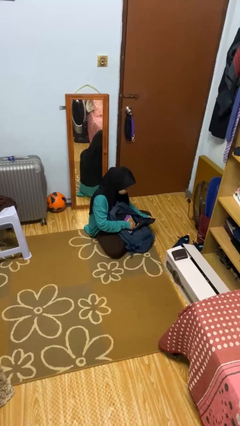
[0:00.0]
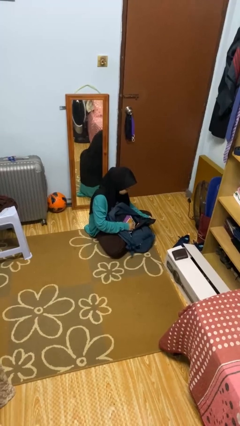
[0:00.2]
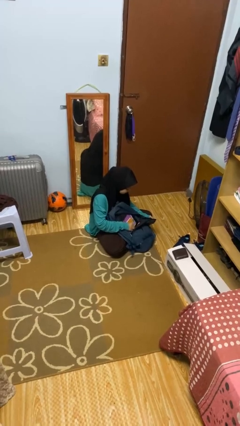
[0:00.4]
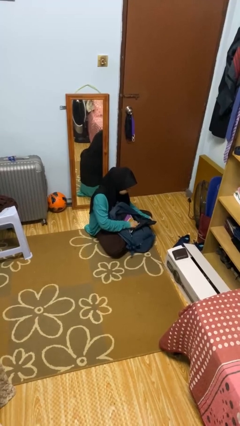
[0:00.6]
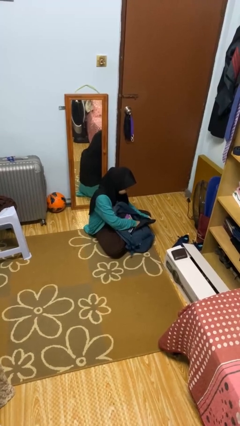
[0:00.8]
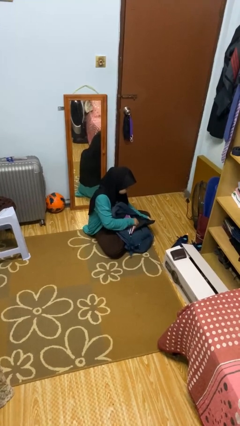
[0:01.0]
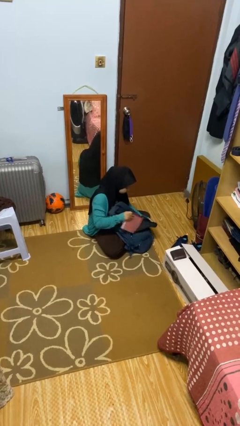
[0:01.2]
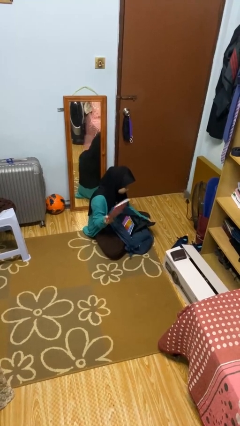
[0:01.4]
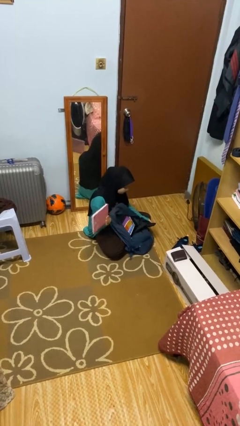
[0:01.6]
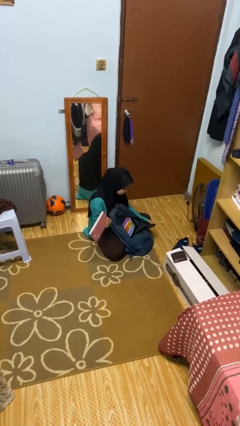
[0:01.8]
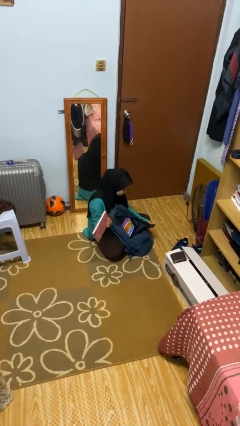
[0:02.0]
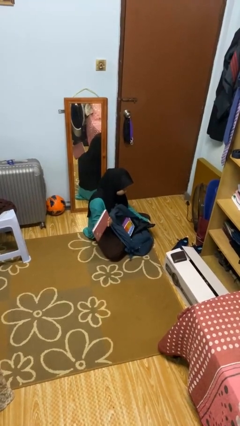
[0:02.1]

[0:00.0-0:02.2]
person takes object from backpack

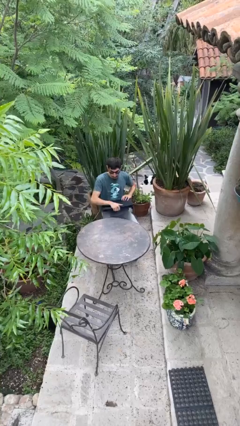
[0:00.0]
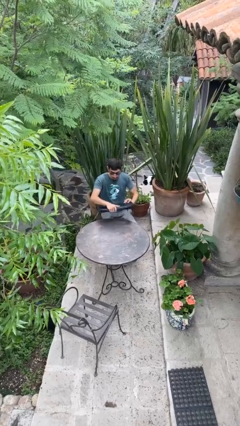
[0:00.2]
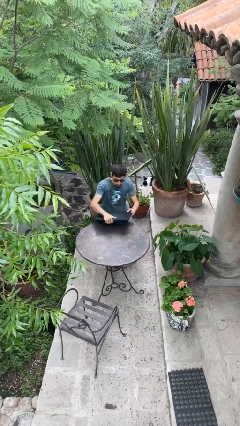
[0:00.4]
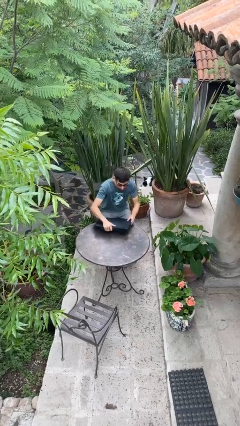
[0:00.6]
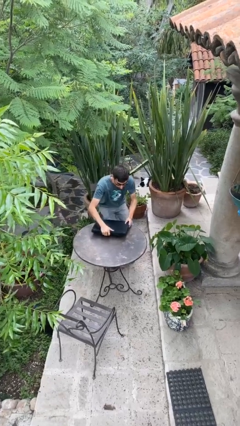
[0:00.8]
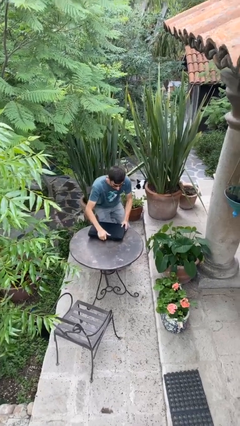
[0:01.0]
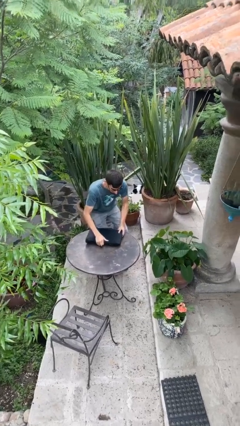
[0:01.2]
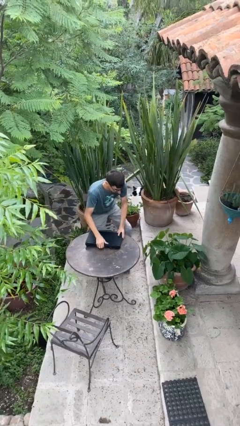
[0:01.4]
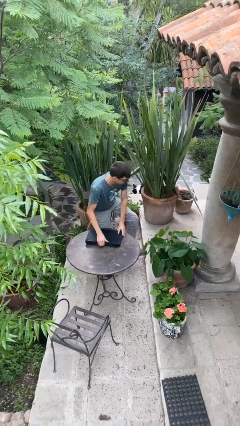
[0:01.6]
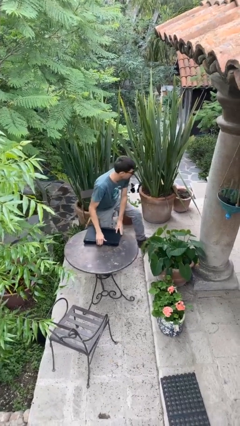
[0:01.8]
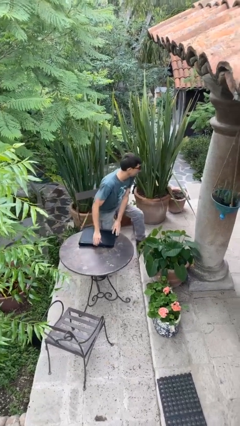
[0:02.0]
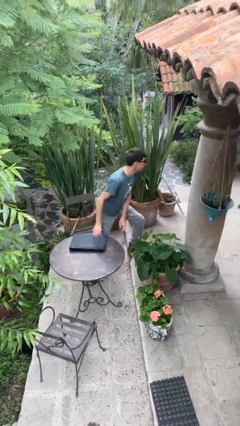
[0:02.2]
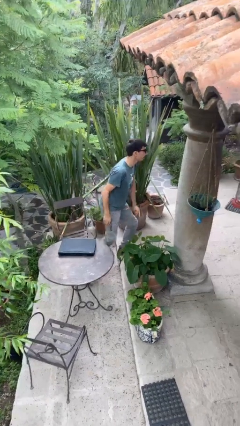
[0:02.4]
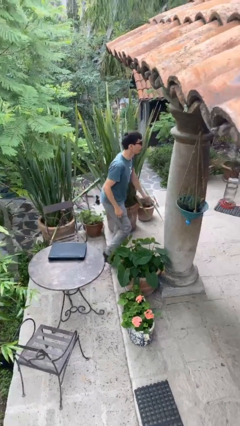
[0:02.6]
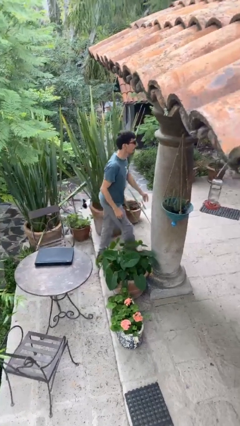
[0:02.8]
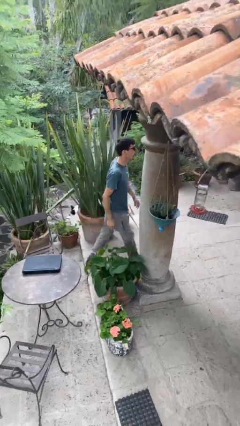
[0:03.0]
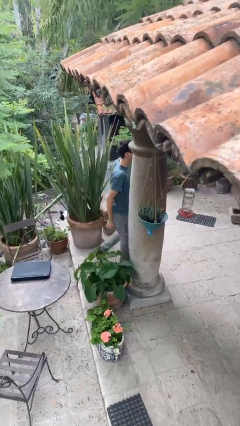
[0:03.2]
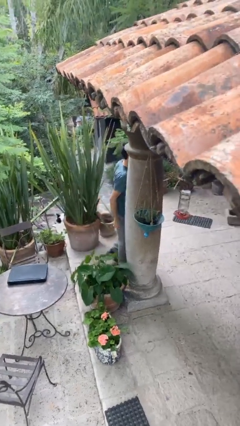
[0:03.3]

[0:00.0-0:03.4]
person stands up

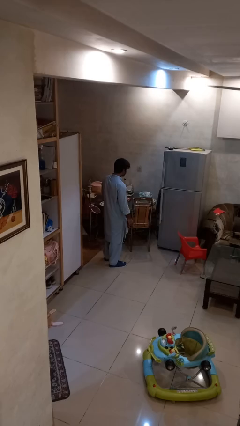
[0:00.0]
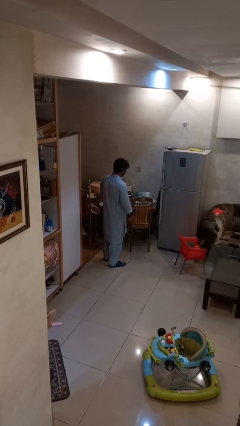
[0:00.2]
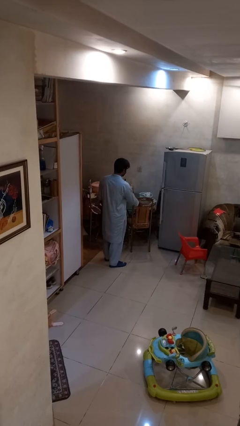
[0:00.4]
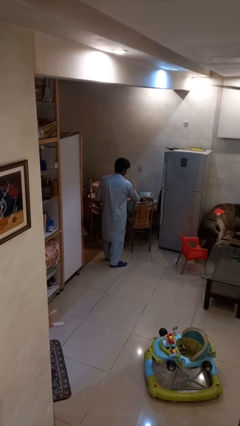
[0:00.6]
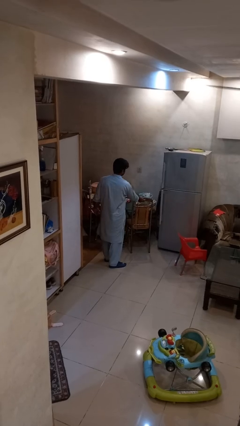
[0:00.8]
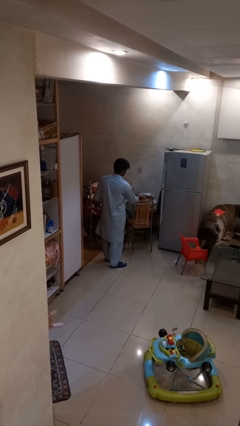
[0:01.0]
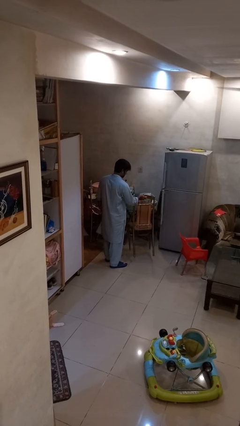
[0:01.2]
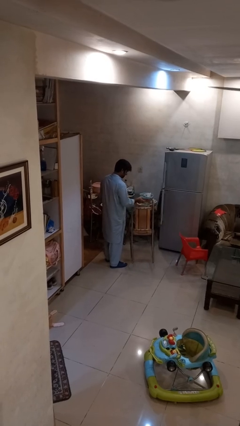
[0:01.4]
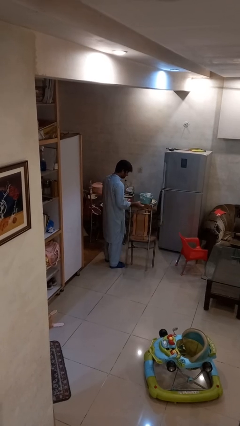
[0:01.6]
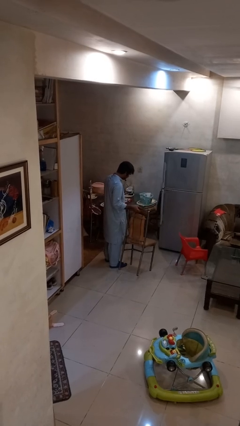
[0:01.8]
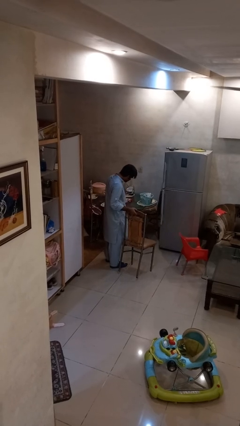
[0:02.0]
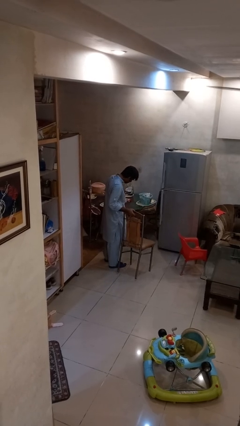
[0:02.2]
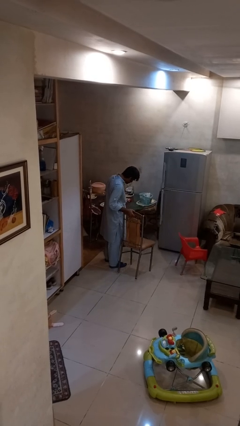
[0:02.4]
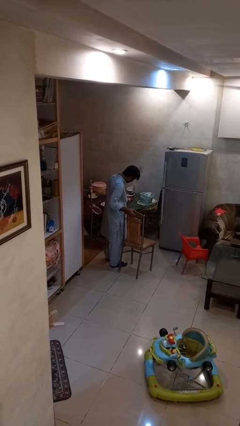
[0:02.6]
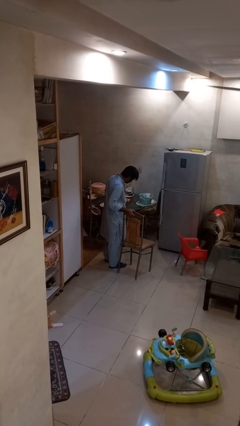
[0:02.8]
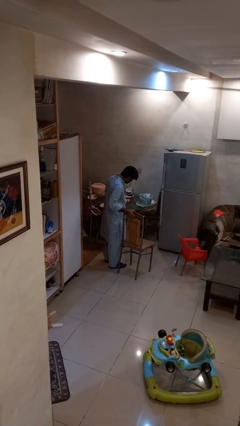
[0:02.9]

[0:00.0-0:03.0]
person pulls out chair

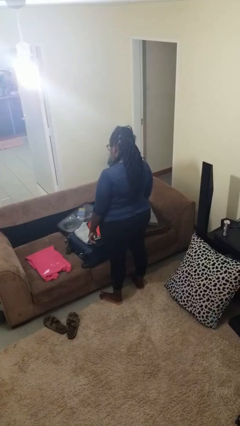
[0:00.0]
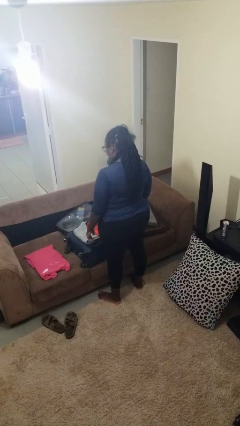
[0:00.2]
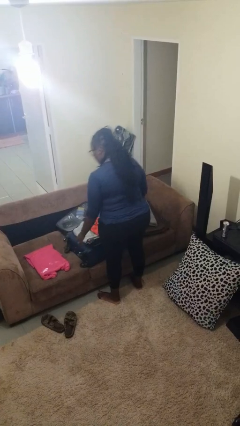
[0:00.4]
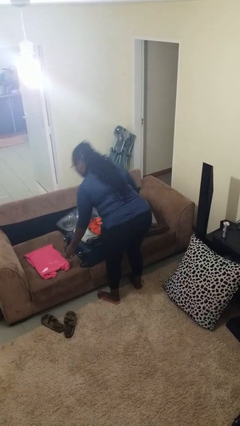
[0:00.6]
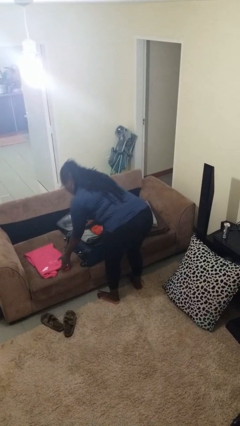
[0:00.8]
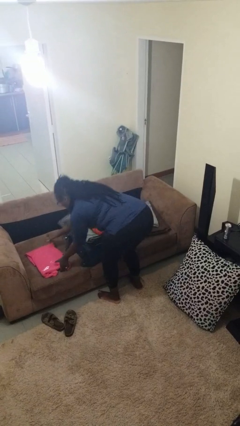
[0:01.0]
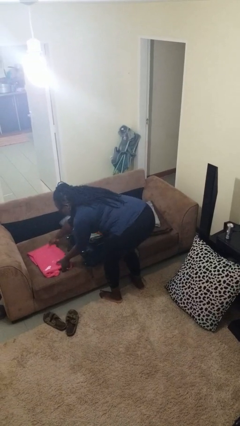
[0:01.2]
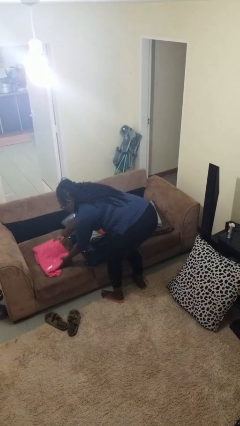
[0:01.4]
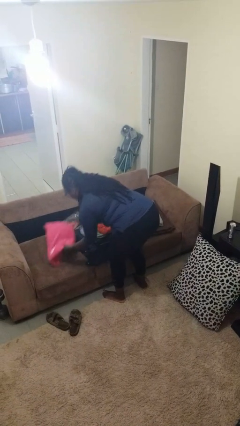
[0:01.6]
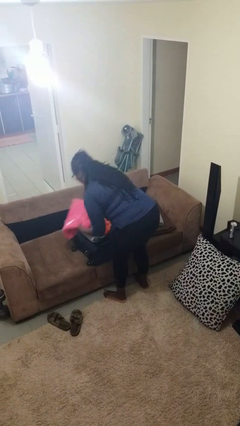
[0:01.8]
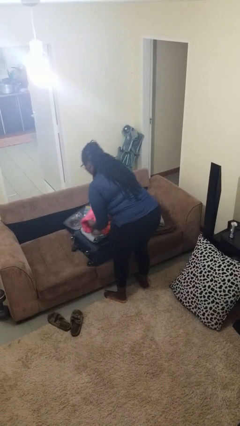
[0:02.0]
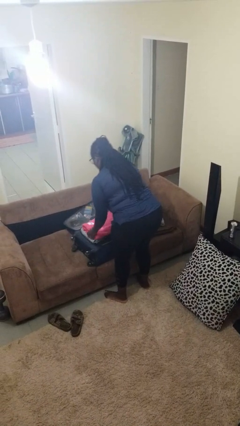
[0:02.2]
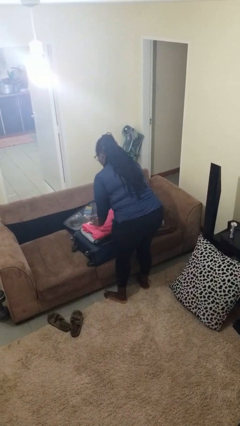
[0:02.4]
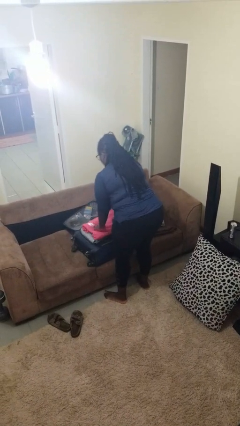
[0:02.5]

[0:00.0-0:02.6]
person loads clothes into suitcase

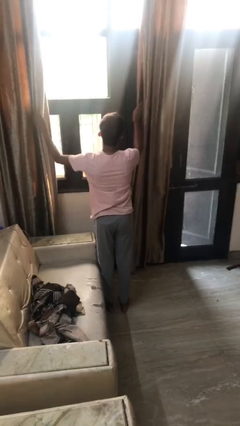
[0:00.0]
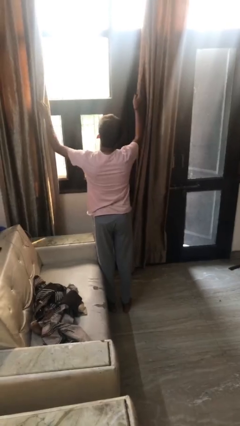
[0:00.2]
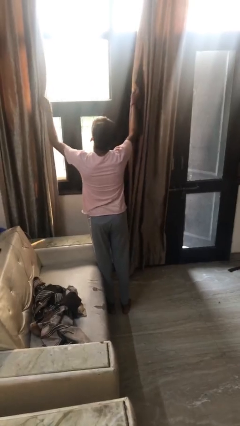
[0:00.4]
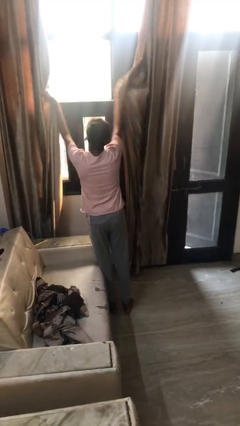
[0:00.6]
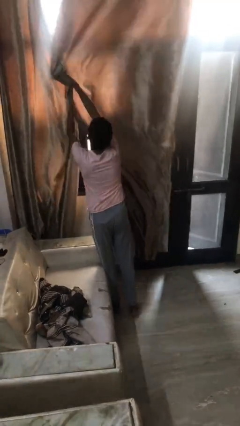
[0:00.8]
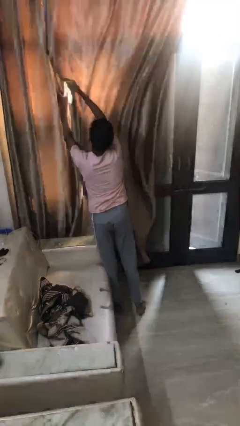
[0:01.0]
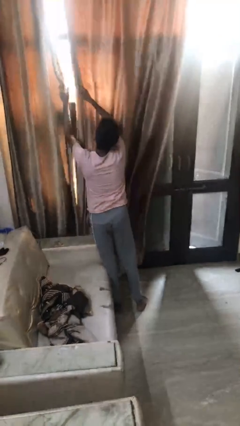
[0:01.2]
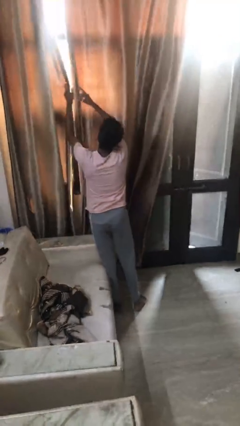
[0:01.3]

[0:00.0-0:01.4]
person closes curtains

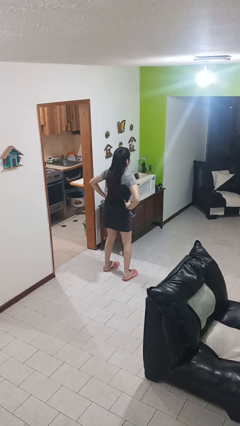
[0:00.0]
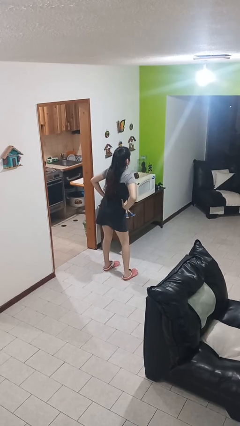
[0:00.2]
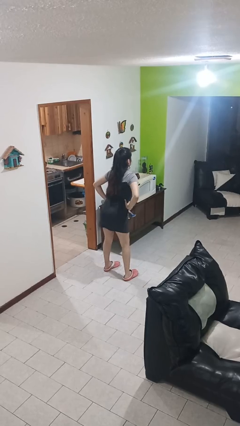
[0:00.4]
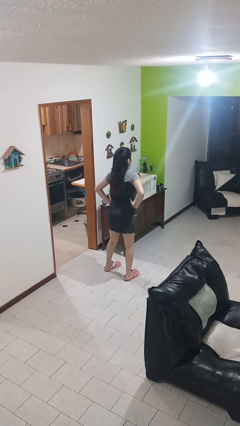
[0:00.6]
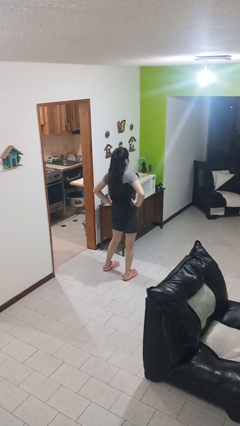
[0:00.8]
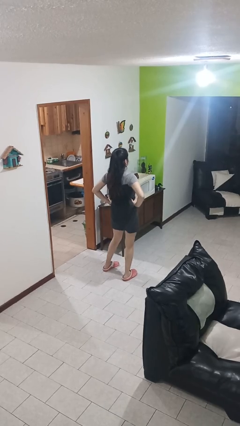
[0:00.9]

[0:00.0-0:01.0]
person wiggles hips

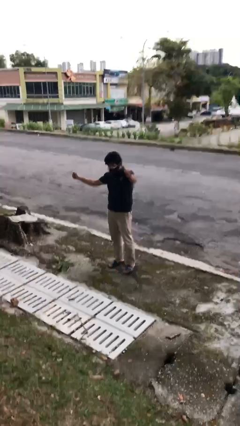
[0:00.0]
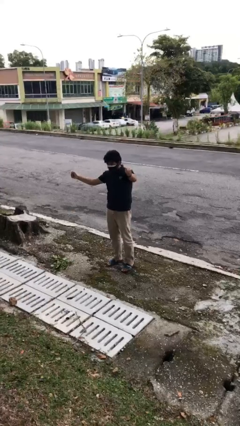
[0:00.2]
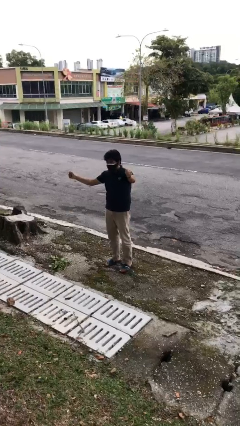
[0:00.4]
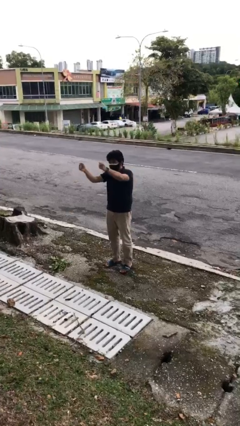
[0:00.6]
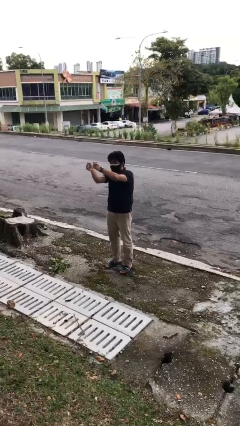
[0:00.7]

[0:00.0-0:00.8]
person gestures zoom in

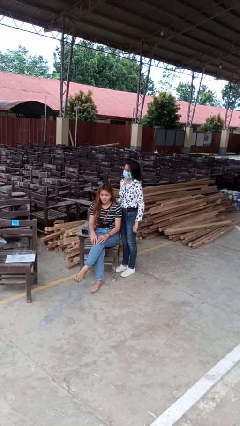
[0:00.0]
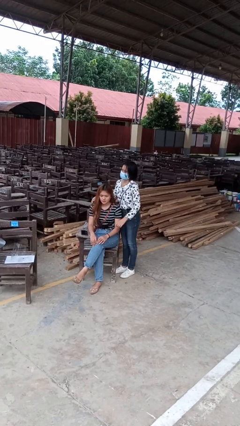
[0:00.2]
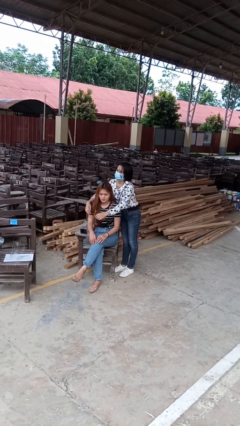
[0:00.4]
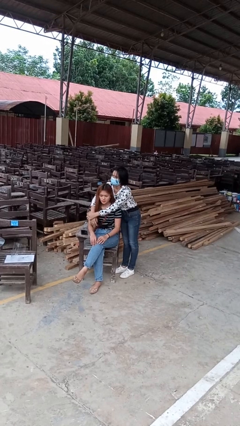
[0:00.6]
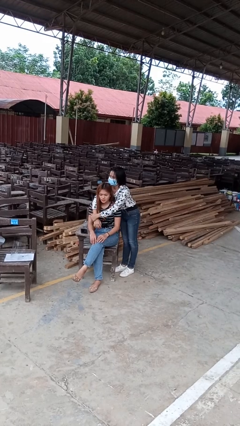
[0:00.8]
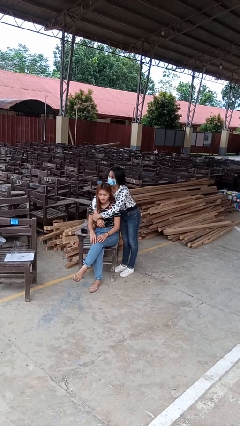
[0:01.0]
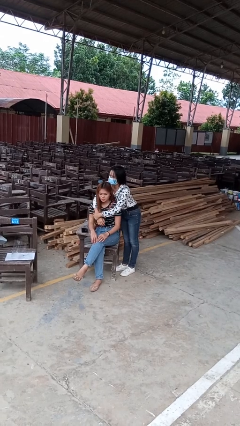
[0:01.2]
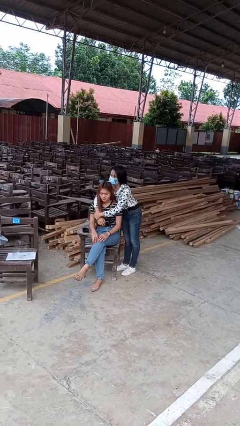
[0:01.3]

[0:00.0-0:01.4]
person hugs person from behind

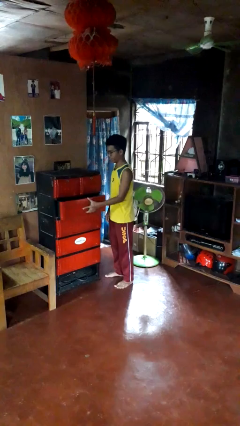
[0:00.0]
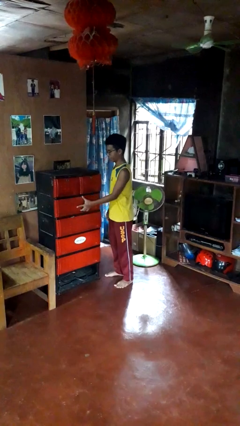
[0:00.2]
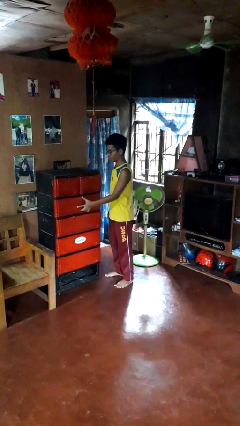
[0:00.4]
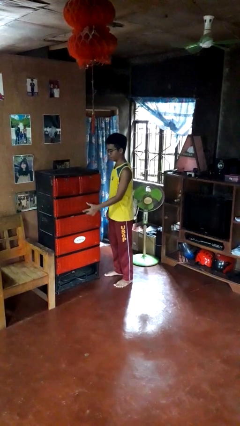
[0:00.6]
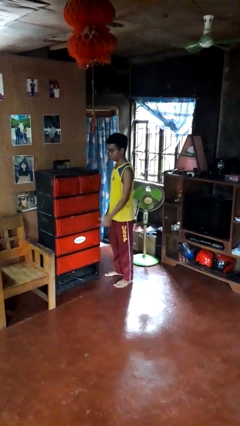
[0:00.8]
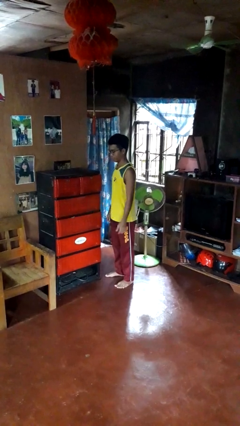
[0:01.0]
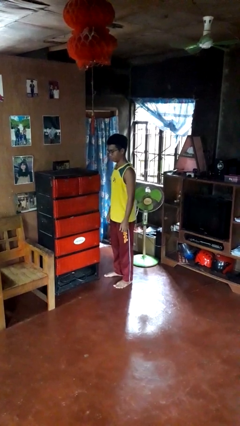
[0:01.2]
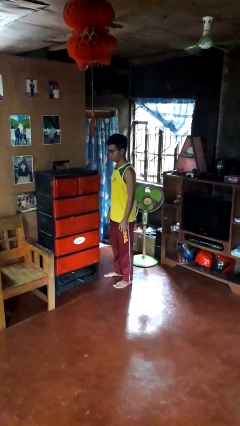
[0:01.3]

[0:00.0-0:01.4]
person closes dresser drawer
